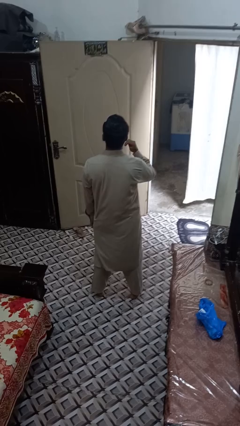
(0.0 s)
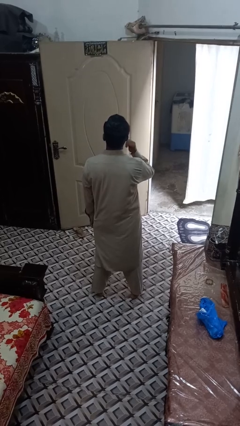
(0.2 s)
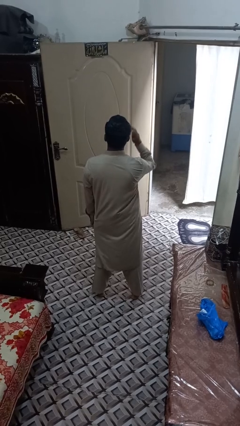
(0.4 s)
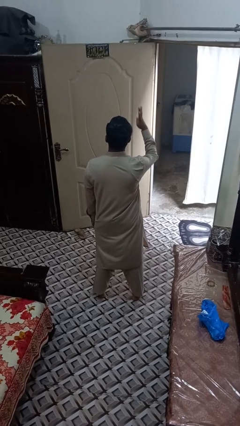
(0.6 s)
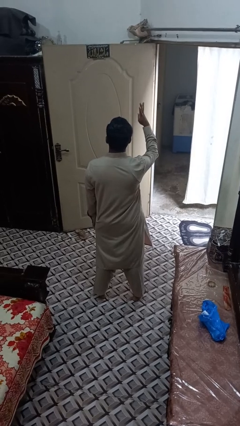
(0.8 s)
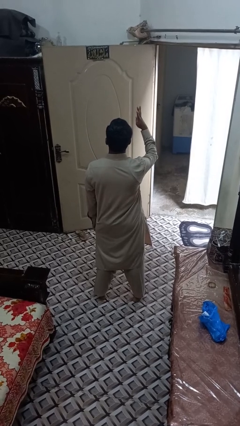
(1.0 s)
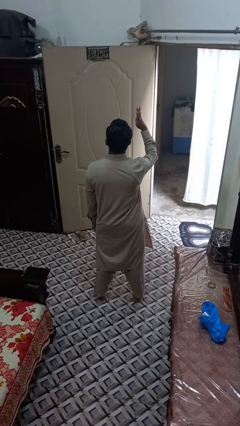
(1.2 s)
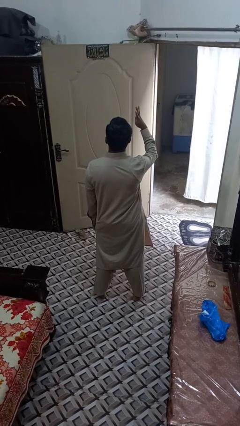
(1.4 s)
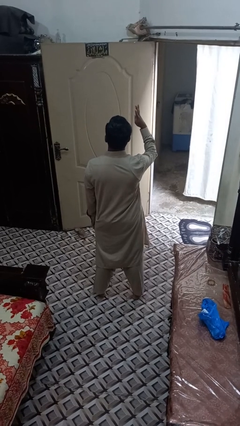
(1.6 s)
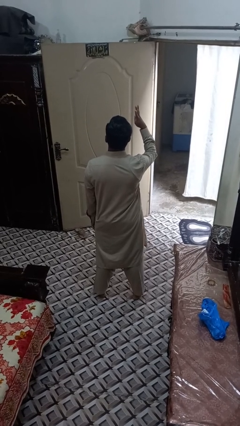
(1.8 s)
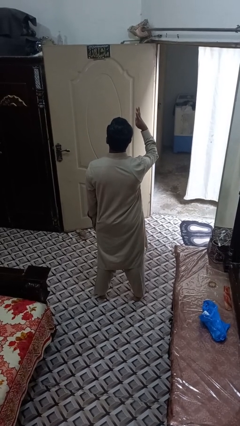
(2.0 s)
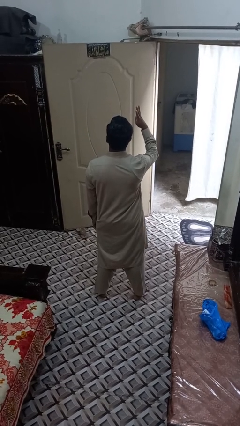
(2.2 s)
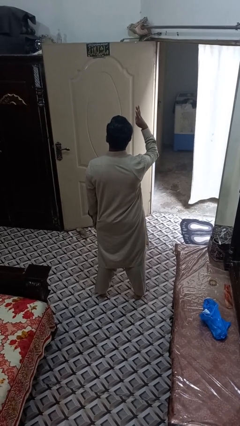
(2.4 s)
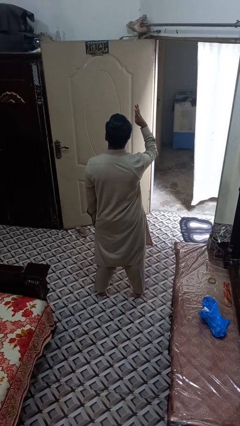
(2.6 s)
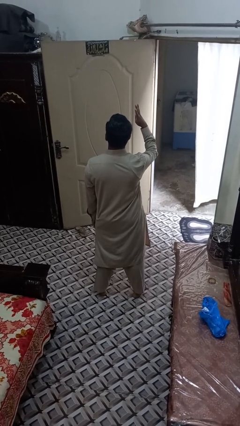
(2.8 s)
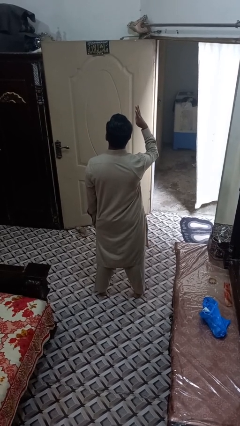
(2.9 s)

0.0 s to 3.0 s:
person gestures number four

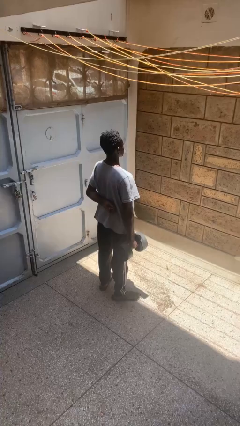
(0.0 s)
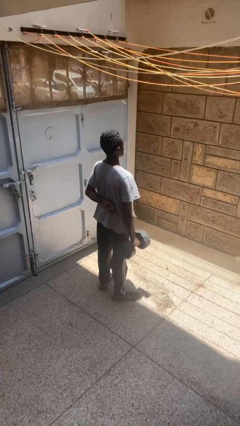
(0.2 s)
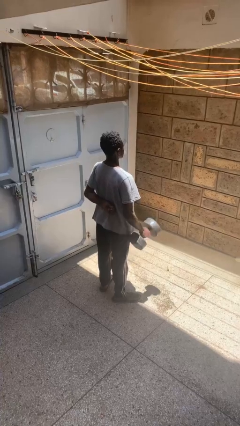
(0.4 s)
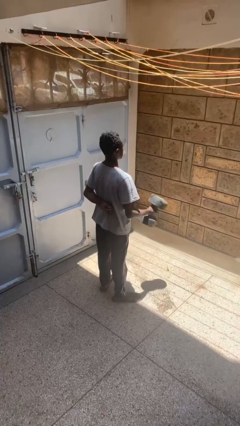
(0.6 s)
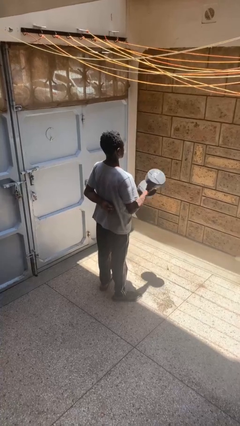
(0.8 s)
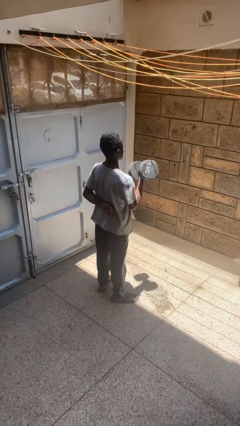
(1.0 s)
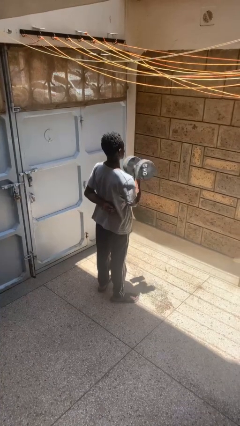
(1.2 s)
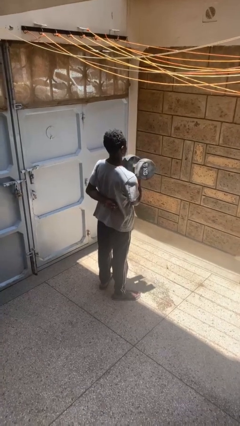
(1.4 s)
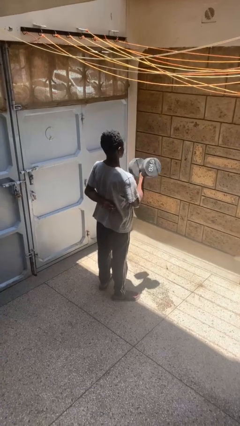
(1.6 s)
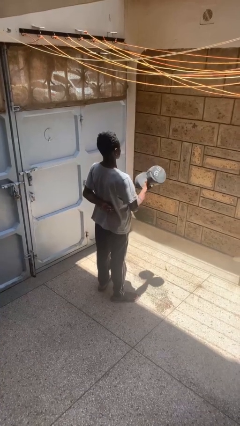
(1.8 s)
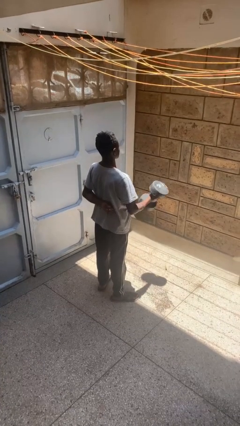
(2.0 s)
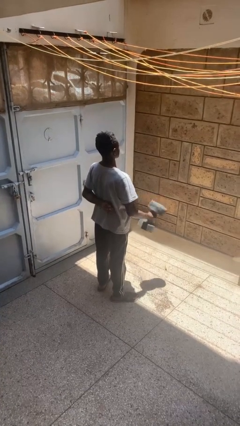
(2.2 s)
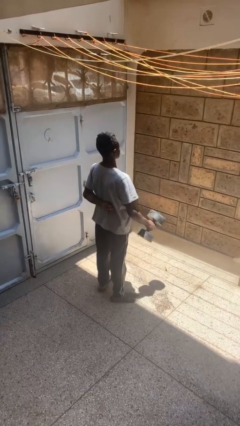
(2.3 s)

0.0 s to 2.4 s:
person lifts dumbbells

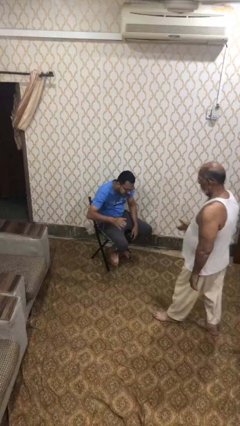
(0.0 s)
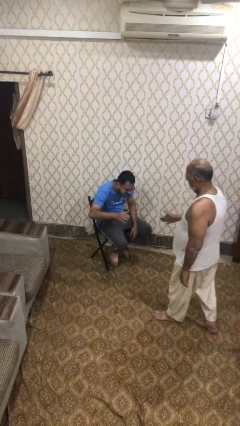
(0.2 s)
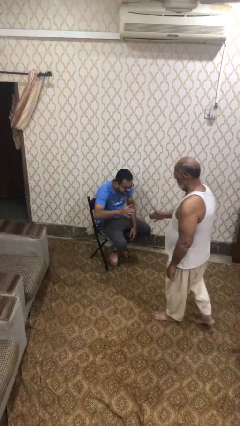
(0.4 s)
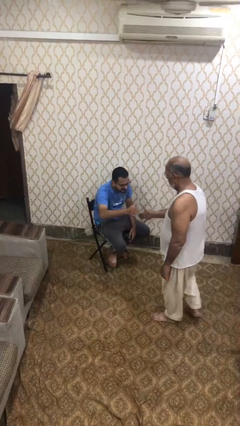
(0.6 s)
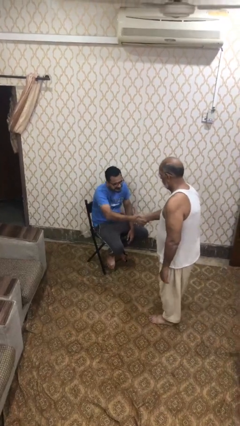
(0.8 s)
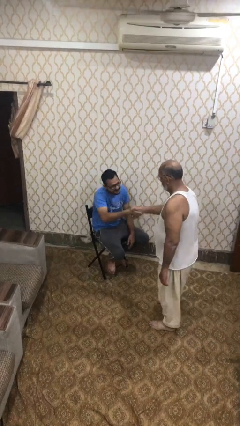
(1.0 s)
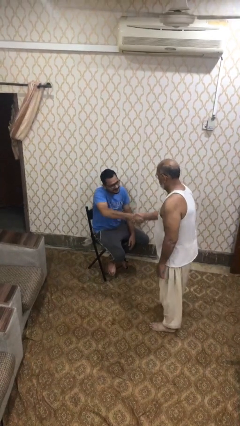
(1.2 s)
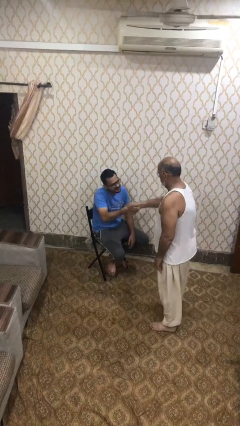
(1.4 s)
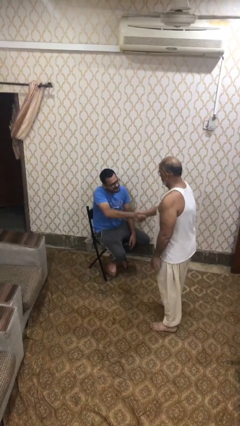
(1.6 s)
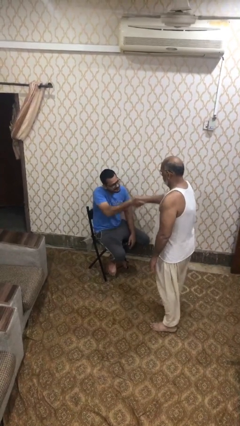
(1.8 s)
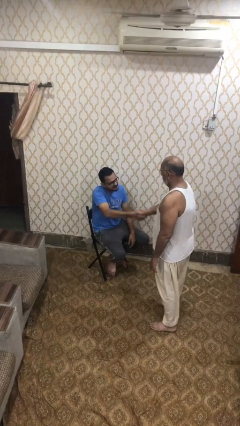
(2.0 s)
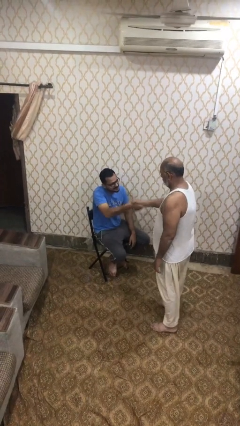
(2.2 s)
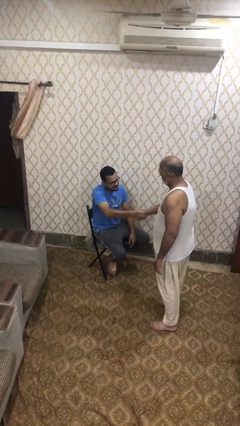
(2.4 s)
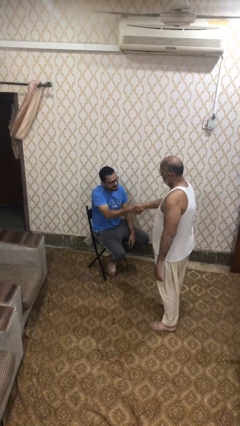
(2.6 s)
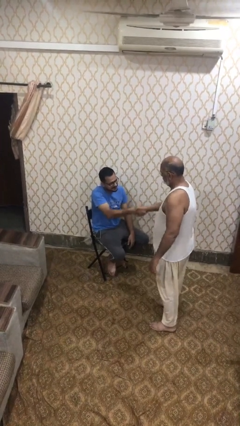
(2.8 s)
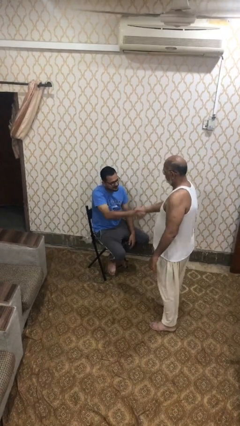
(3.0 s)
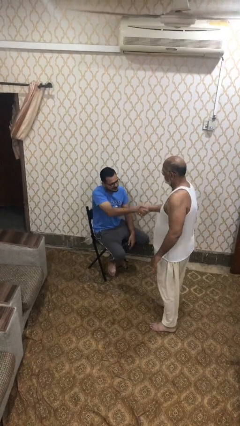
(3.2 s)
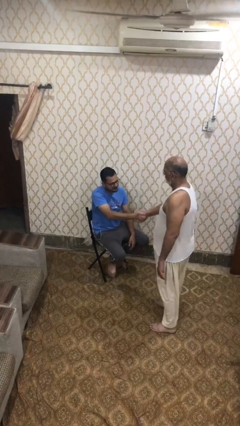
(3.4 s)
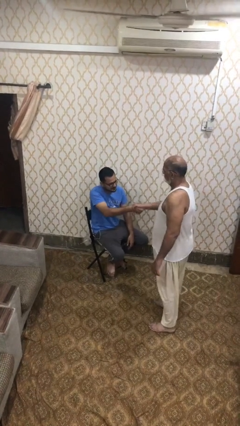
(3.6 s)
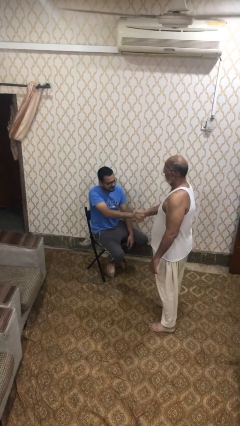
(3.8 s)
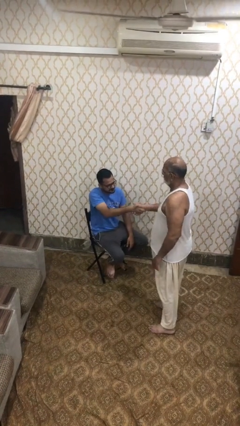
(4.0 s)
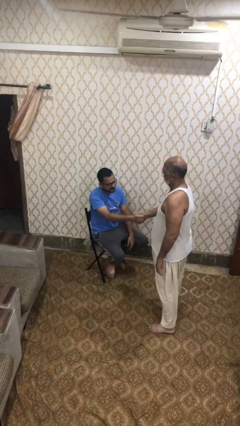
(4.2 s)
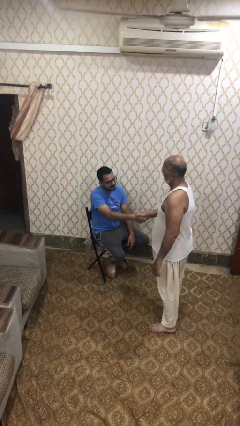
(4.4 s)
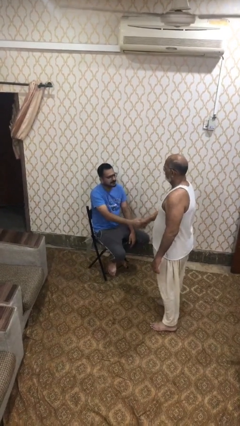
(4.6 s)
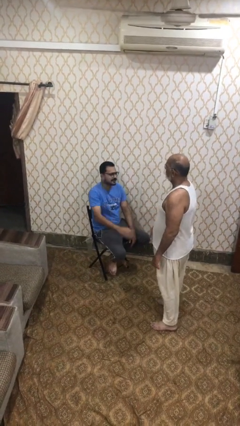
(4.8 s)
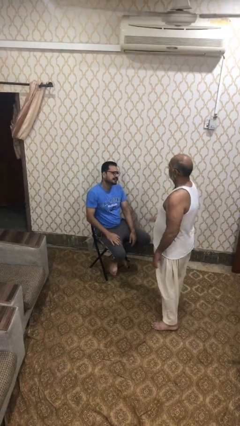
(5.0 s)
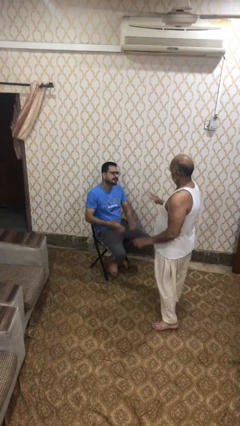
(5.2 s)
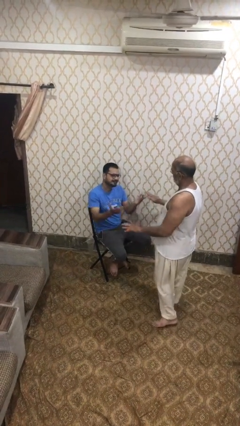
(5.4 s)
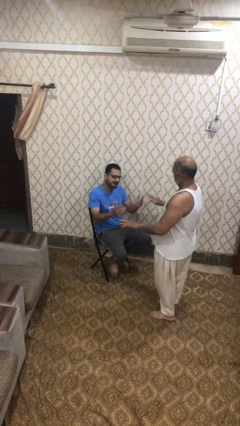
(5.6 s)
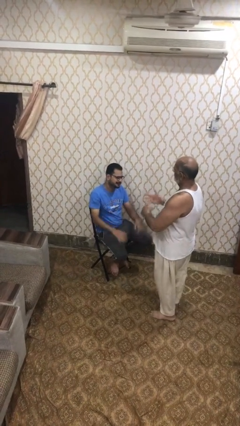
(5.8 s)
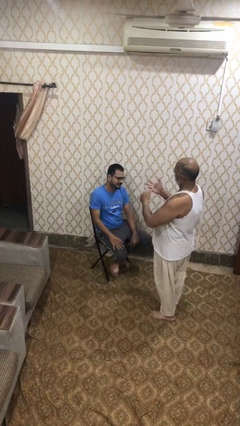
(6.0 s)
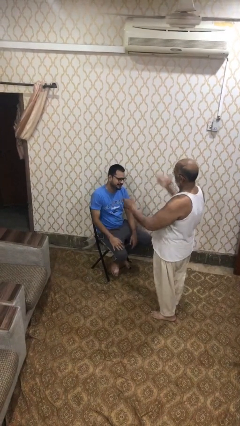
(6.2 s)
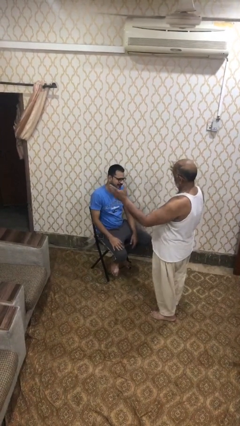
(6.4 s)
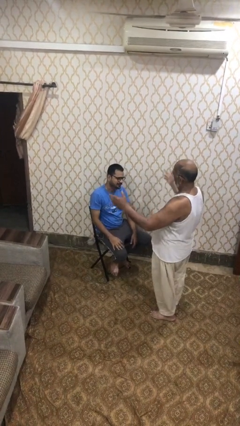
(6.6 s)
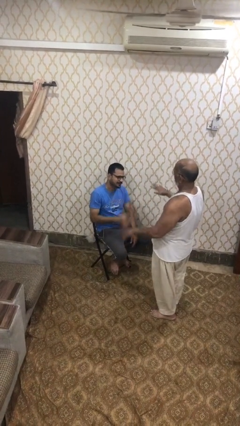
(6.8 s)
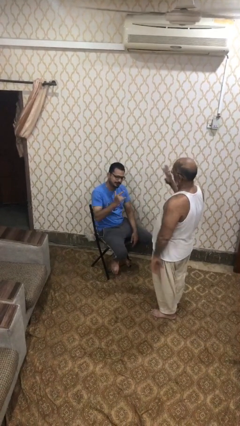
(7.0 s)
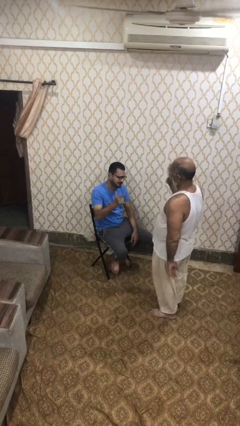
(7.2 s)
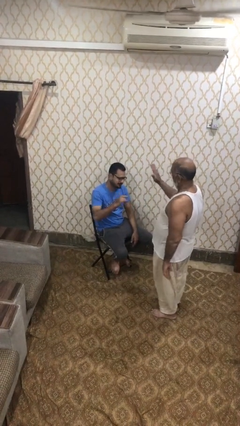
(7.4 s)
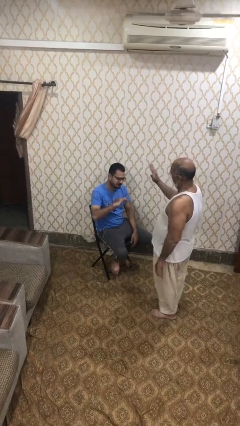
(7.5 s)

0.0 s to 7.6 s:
person shakes hand

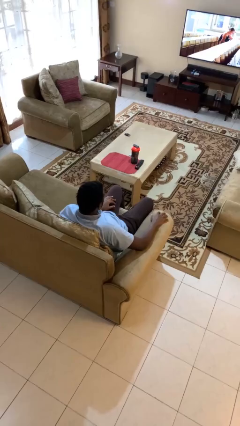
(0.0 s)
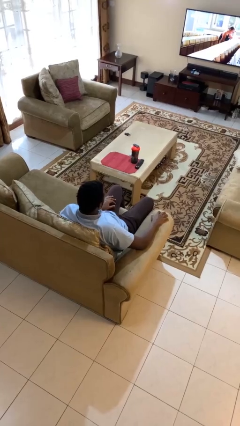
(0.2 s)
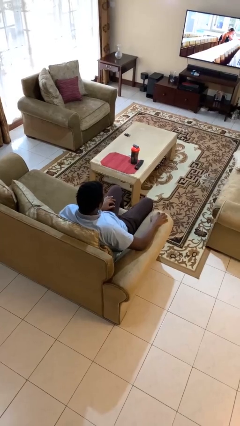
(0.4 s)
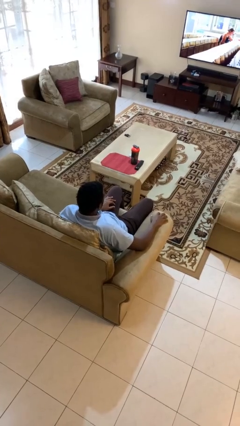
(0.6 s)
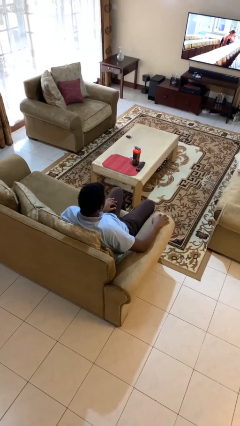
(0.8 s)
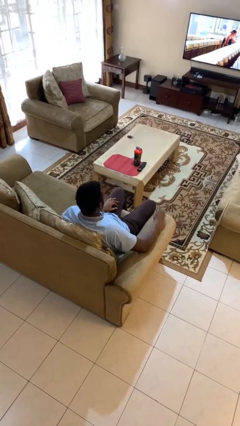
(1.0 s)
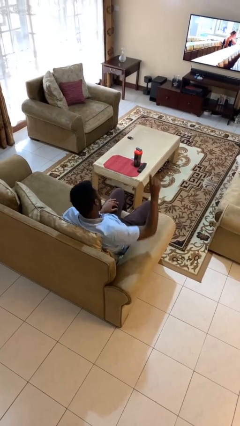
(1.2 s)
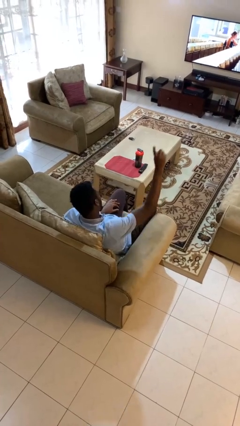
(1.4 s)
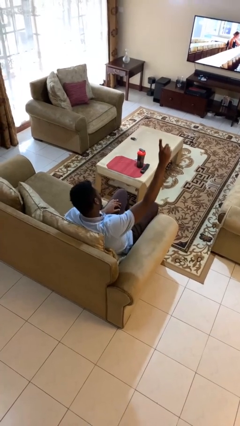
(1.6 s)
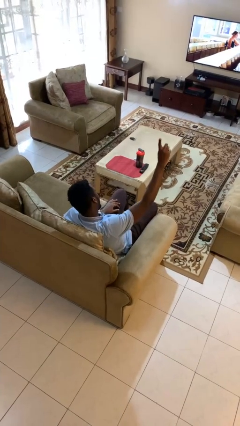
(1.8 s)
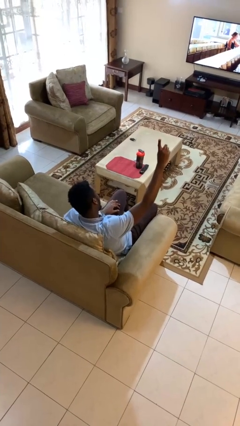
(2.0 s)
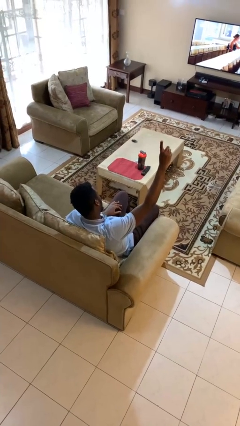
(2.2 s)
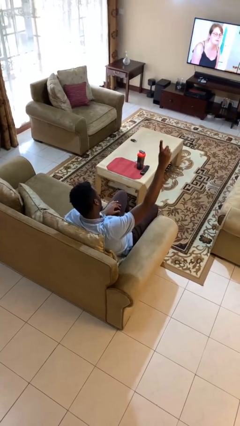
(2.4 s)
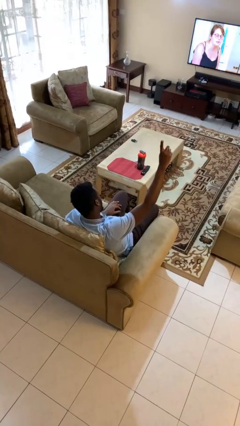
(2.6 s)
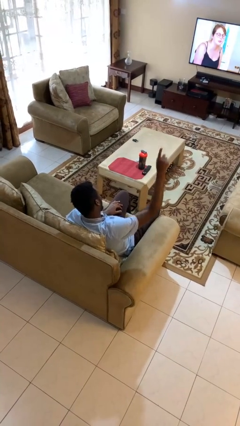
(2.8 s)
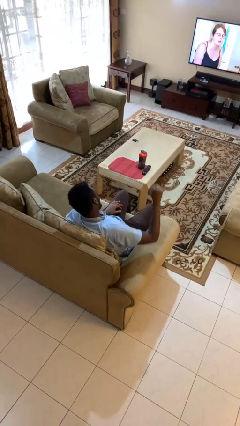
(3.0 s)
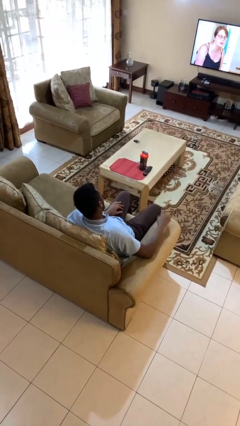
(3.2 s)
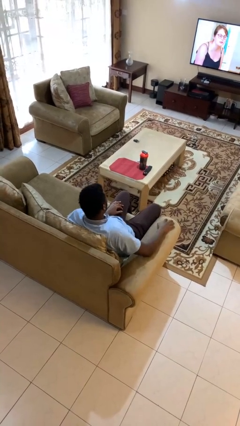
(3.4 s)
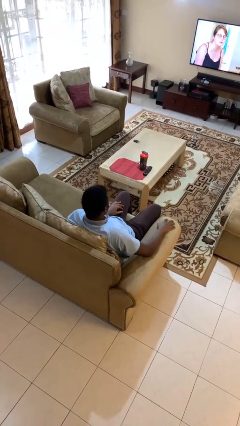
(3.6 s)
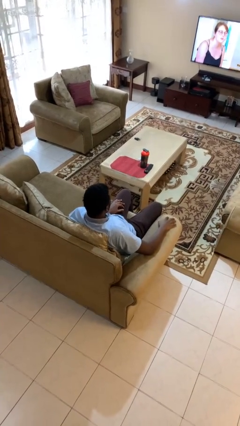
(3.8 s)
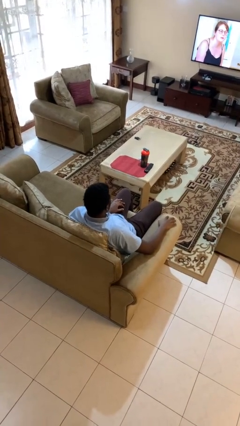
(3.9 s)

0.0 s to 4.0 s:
person gestures number one

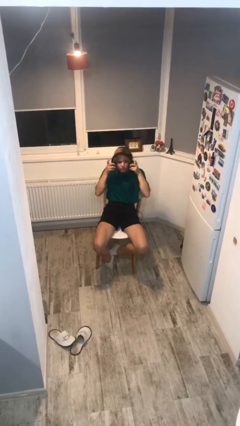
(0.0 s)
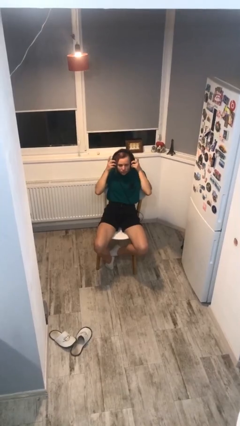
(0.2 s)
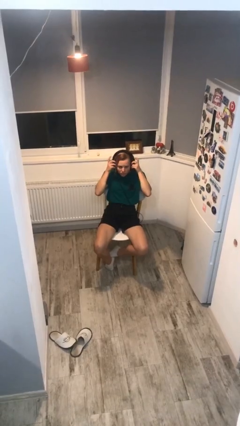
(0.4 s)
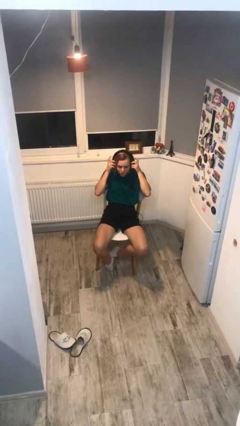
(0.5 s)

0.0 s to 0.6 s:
person puts on headphones
